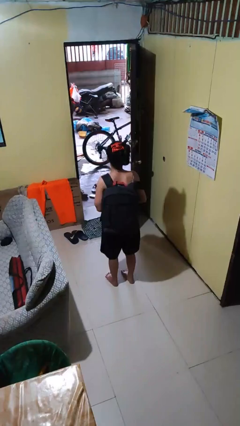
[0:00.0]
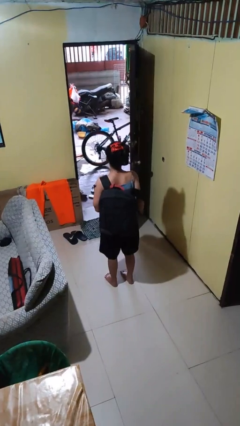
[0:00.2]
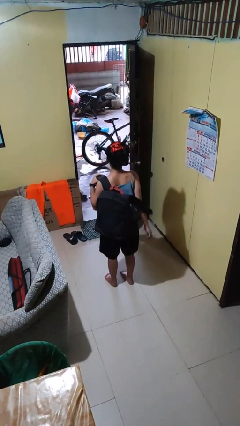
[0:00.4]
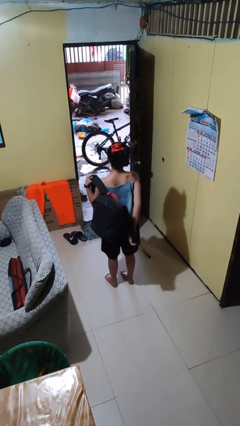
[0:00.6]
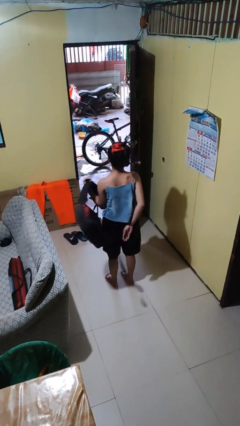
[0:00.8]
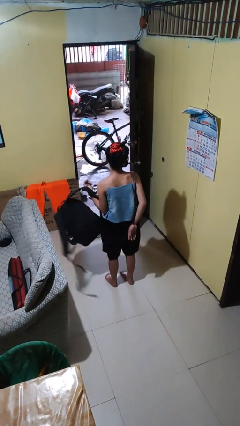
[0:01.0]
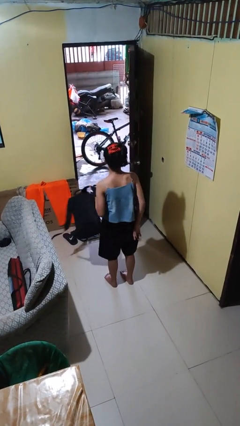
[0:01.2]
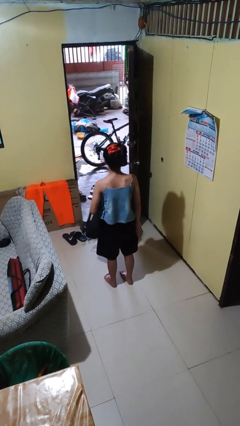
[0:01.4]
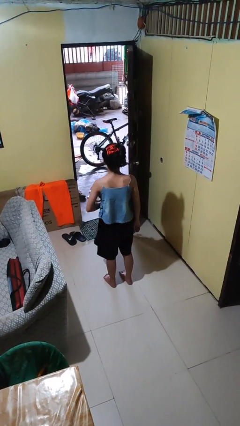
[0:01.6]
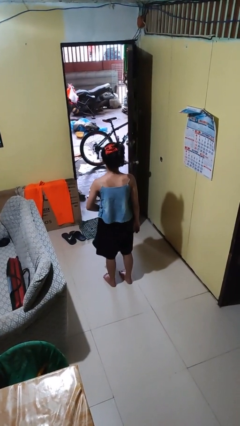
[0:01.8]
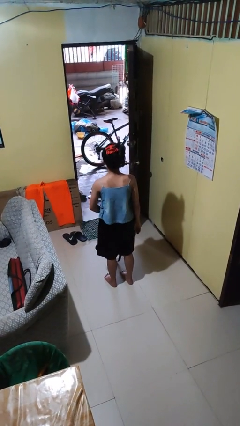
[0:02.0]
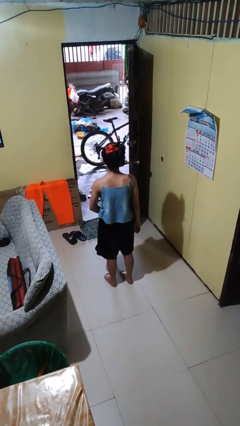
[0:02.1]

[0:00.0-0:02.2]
person takes off backpack

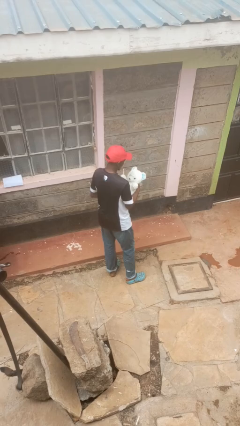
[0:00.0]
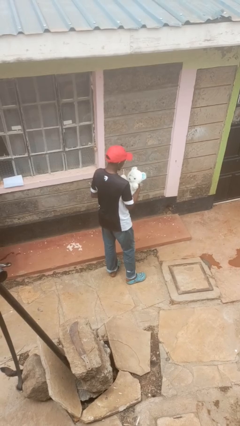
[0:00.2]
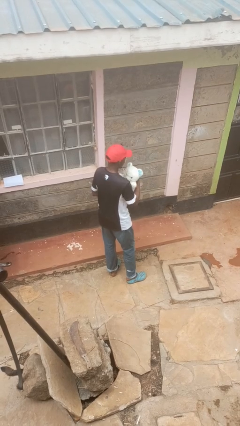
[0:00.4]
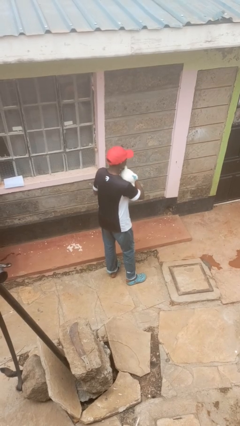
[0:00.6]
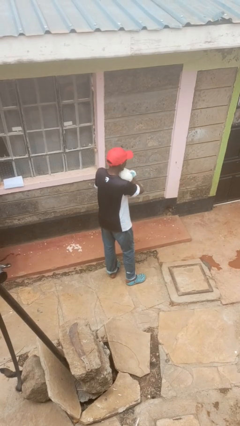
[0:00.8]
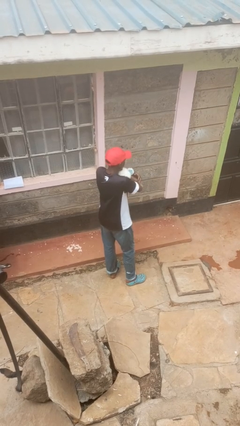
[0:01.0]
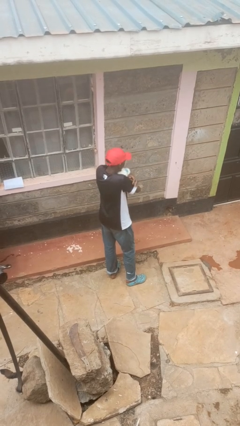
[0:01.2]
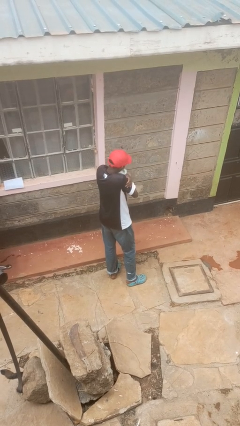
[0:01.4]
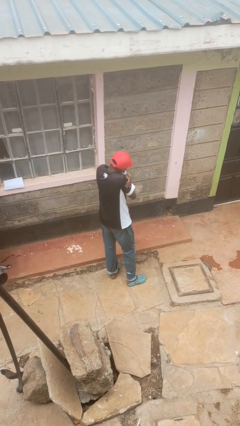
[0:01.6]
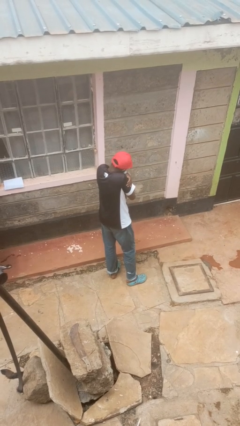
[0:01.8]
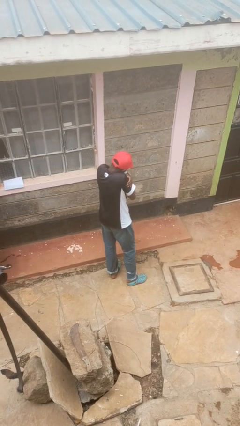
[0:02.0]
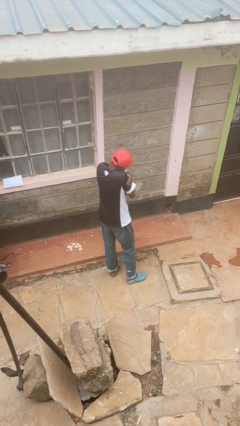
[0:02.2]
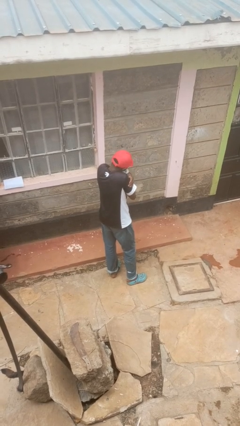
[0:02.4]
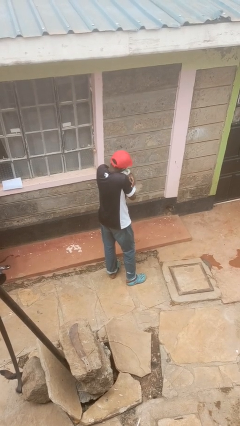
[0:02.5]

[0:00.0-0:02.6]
person hugs stuffed animal

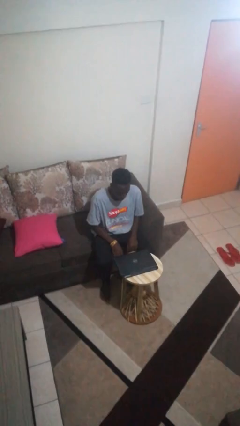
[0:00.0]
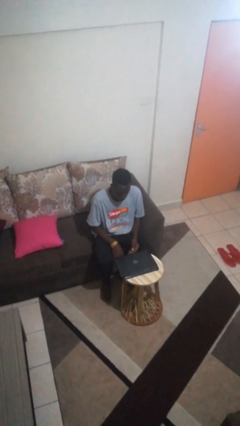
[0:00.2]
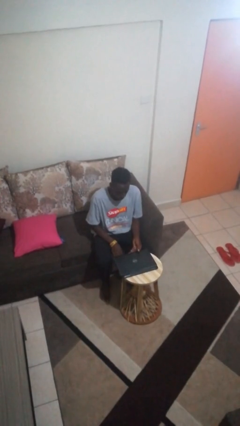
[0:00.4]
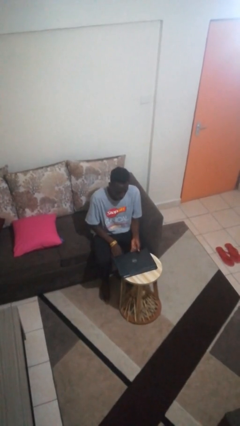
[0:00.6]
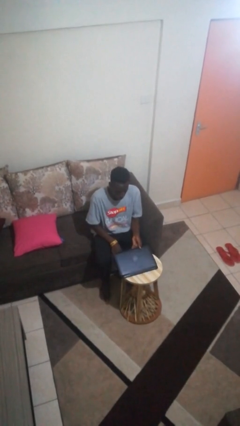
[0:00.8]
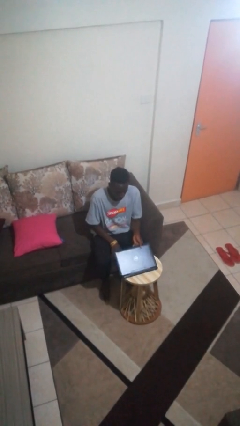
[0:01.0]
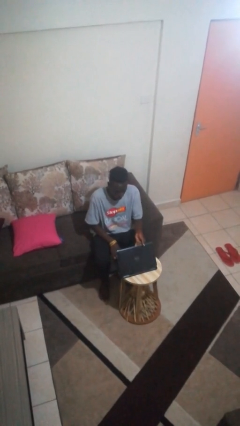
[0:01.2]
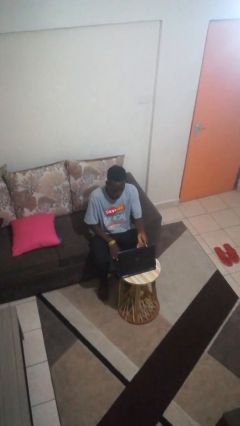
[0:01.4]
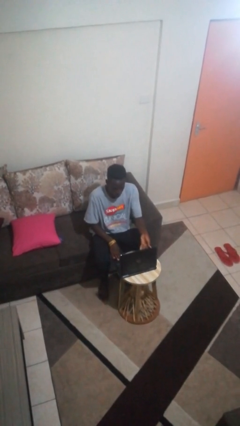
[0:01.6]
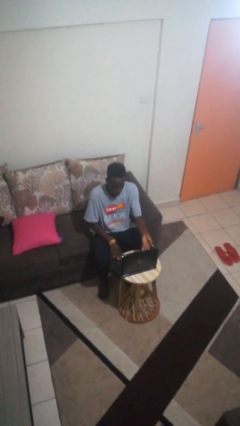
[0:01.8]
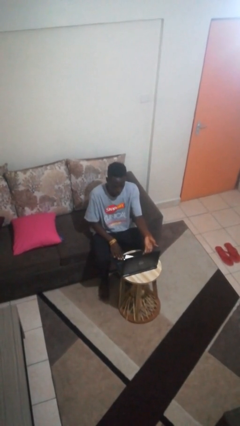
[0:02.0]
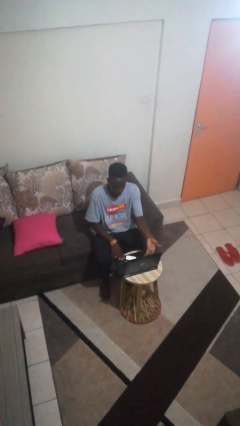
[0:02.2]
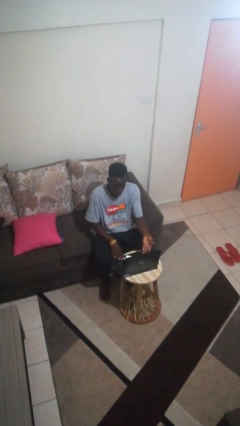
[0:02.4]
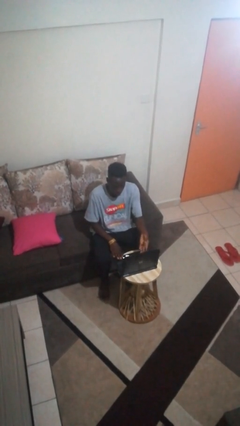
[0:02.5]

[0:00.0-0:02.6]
person opens laptop

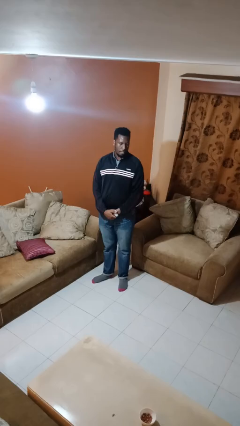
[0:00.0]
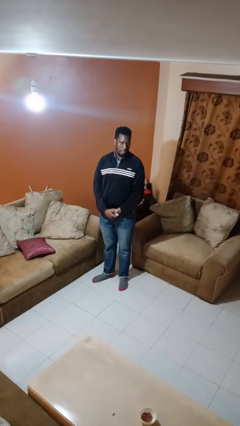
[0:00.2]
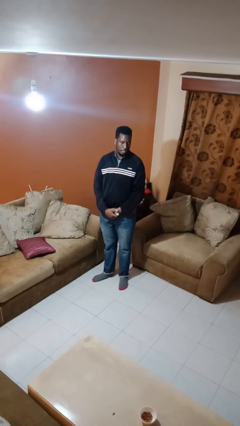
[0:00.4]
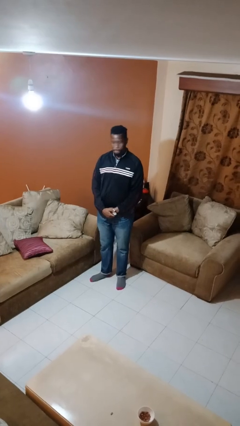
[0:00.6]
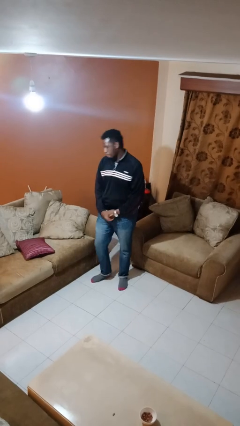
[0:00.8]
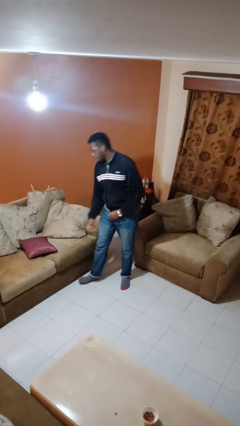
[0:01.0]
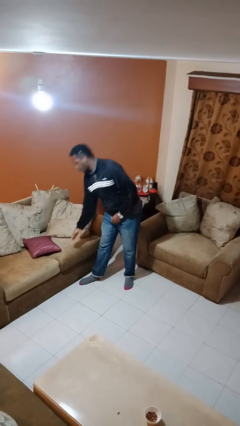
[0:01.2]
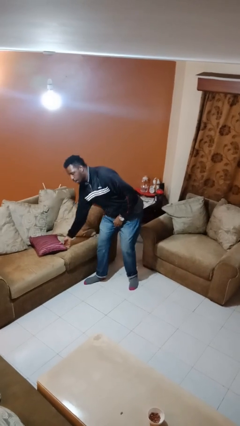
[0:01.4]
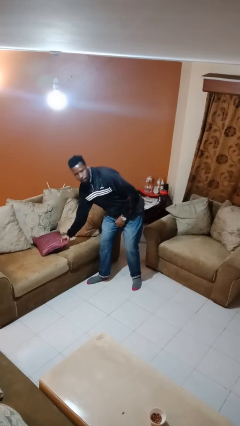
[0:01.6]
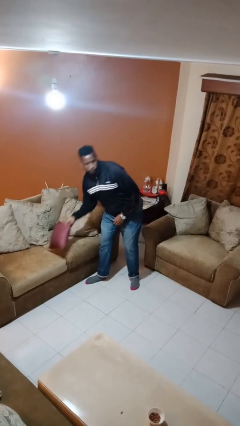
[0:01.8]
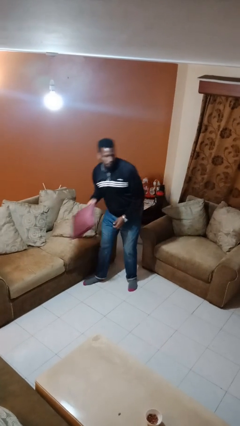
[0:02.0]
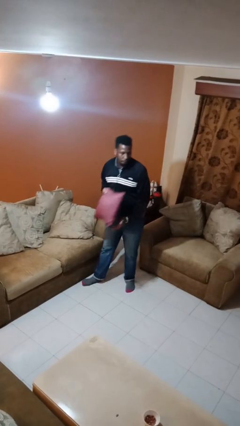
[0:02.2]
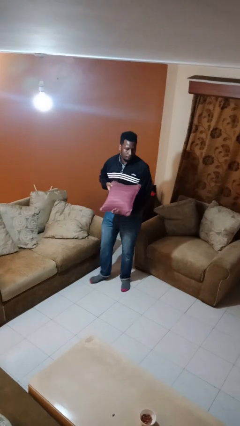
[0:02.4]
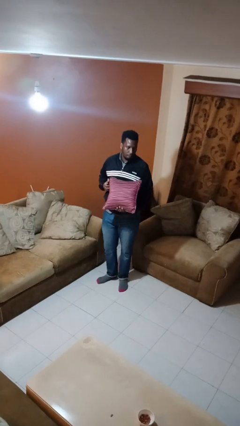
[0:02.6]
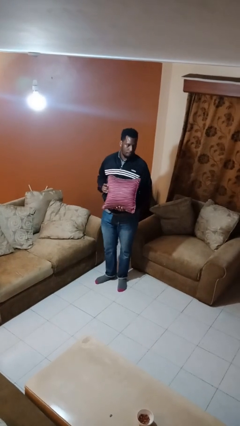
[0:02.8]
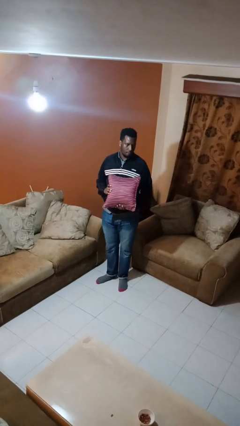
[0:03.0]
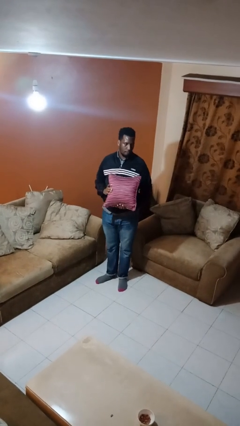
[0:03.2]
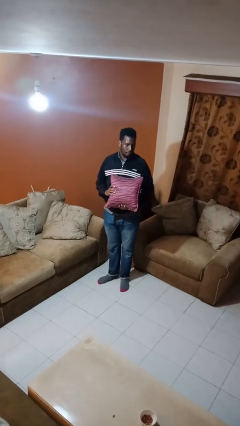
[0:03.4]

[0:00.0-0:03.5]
person picks up object from couch

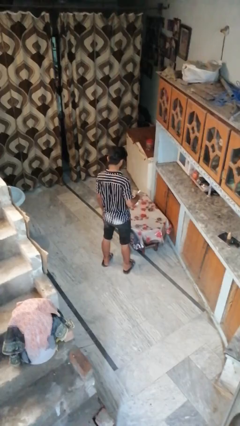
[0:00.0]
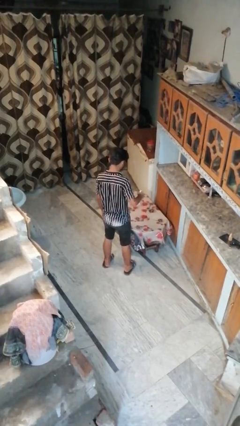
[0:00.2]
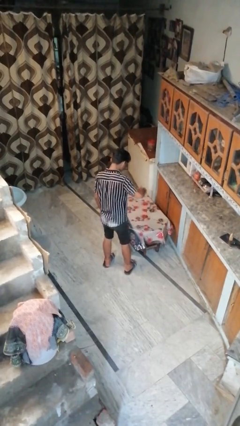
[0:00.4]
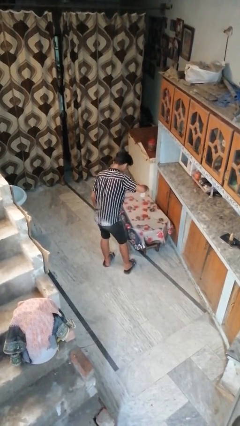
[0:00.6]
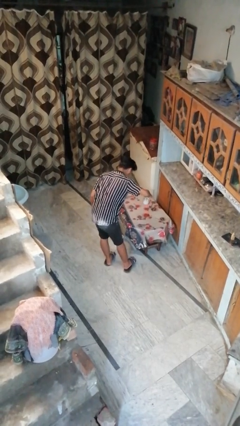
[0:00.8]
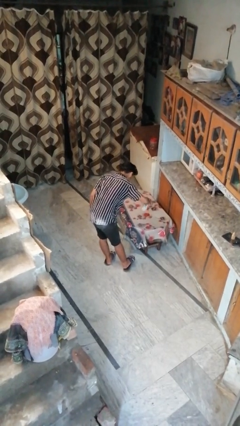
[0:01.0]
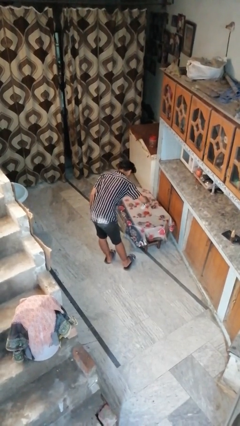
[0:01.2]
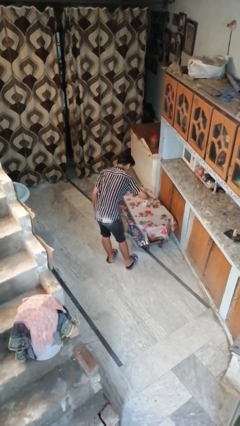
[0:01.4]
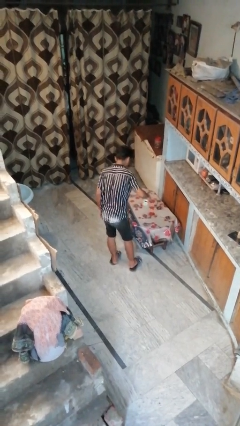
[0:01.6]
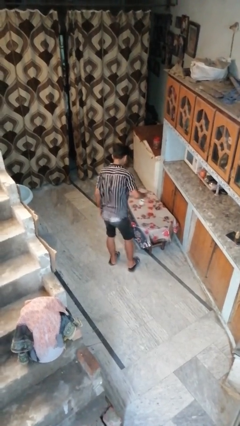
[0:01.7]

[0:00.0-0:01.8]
person sprays from bottle

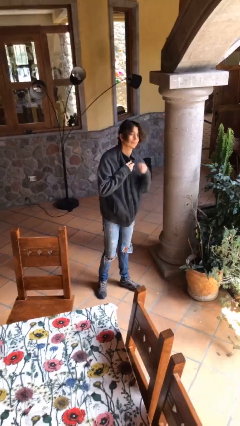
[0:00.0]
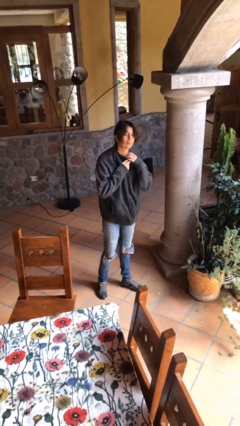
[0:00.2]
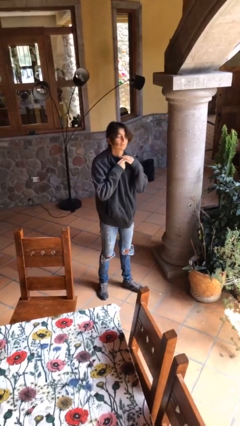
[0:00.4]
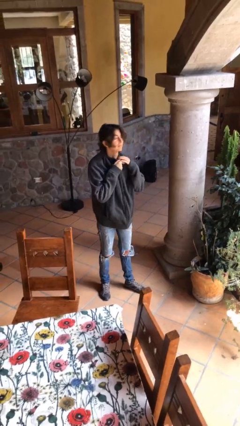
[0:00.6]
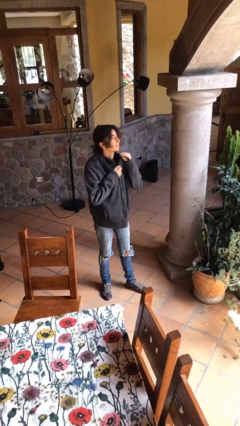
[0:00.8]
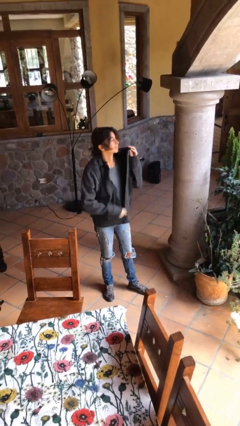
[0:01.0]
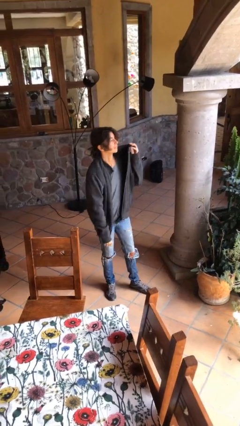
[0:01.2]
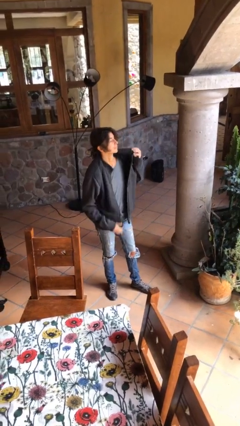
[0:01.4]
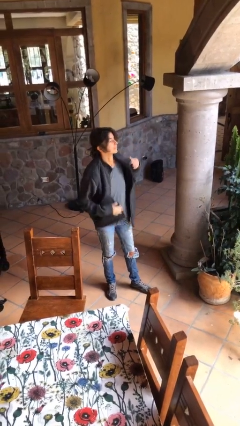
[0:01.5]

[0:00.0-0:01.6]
person unzips jacket

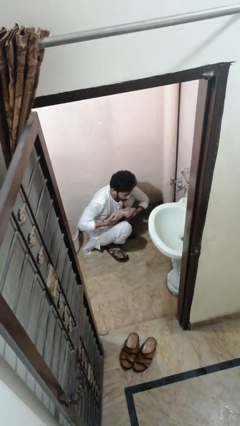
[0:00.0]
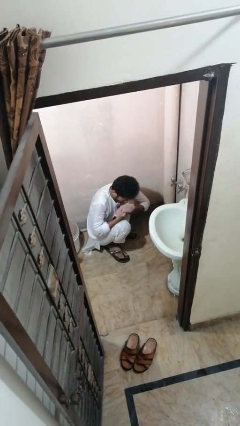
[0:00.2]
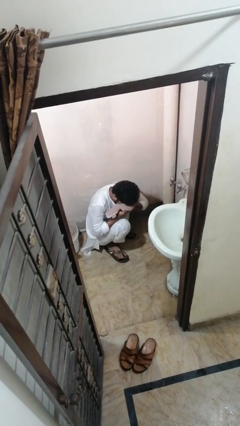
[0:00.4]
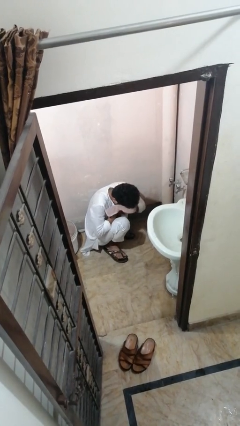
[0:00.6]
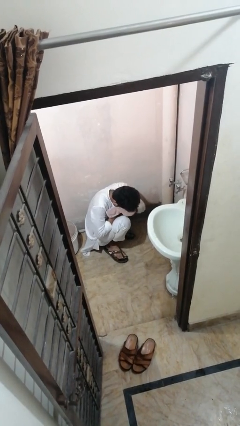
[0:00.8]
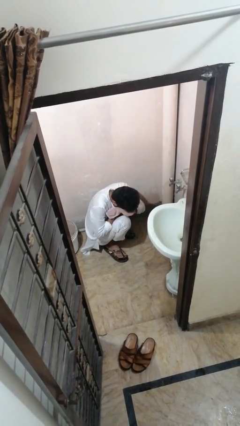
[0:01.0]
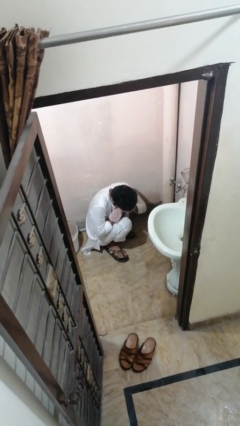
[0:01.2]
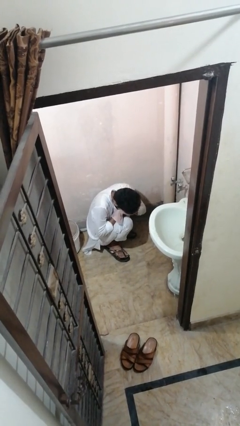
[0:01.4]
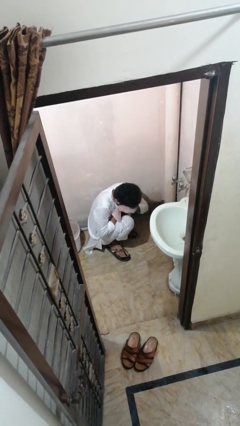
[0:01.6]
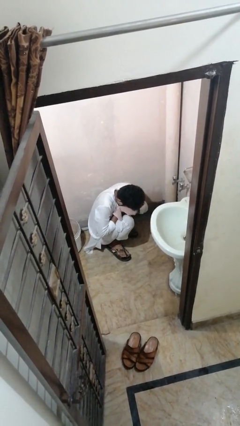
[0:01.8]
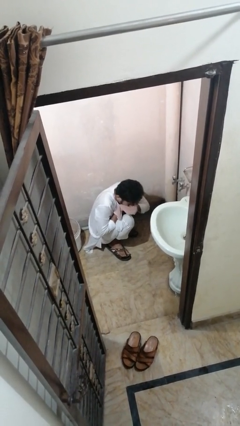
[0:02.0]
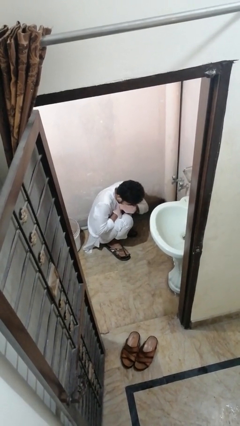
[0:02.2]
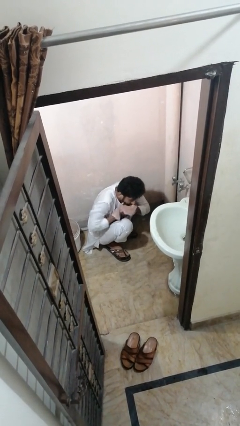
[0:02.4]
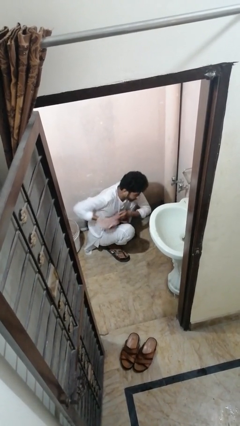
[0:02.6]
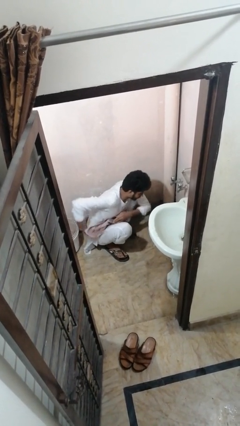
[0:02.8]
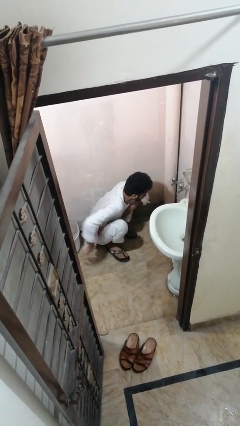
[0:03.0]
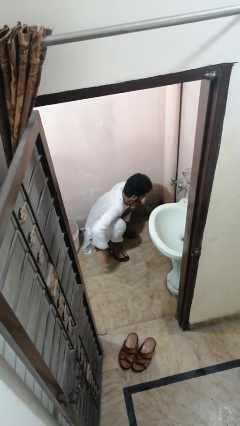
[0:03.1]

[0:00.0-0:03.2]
person dries face with towel
